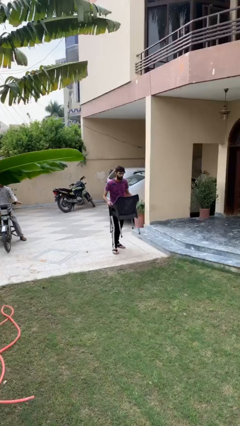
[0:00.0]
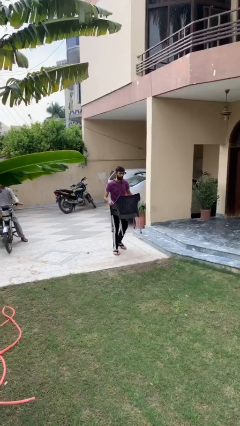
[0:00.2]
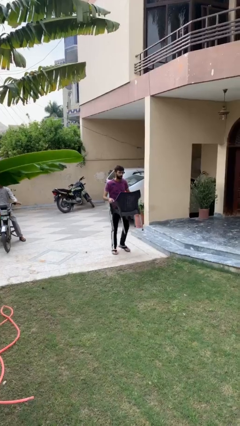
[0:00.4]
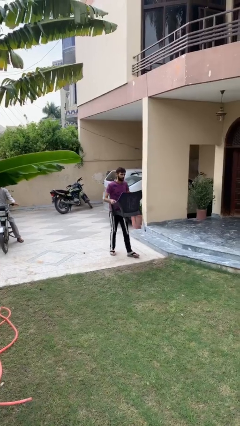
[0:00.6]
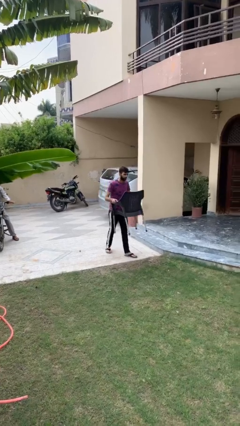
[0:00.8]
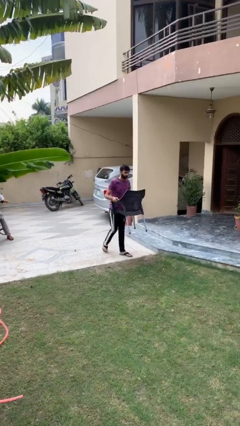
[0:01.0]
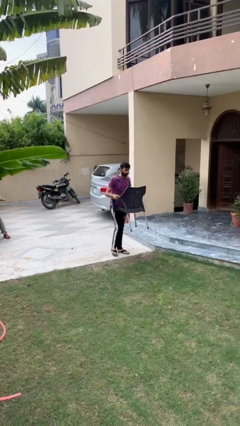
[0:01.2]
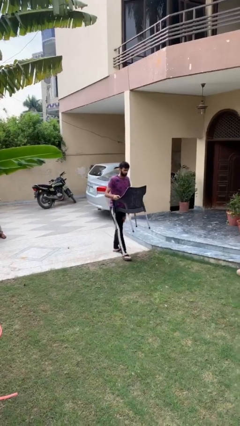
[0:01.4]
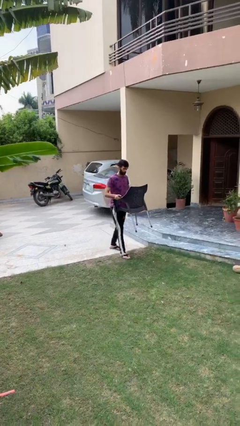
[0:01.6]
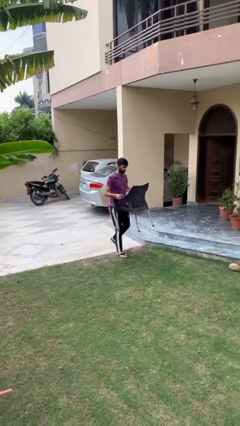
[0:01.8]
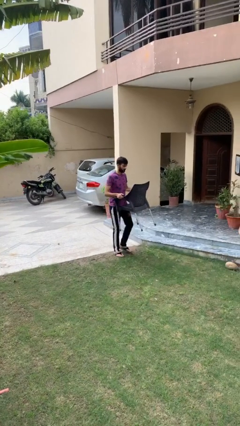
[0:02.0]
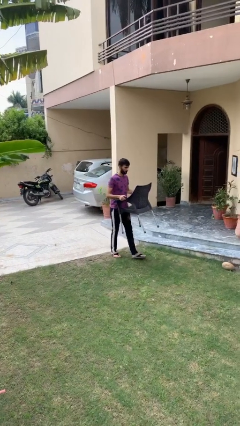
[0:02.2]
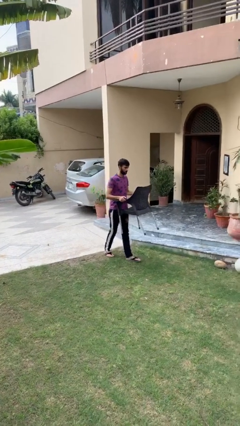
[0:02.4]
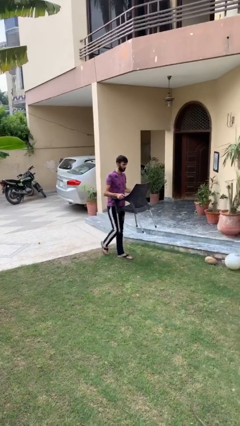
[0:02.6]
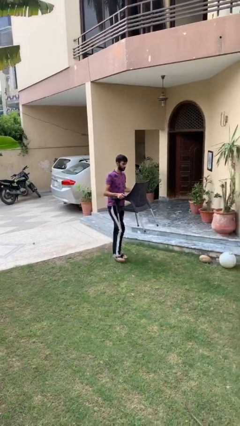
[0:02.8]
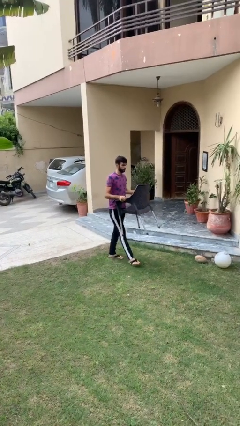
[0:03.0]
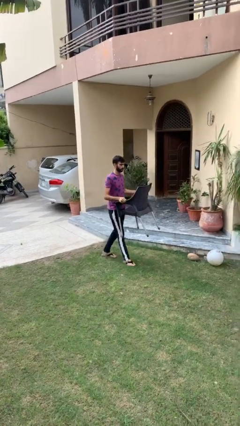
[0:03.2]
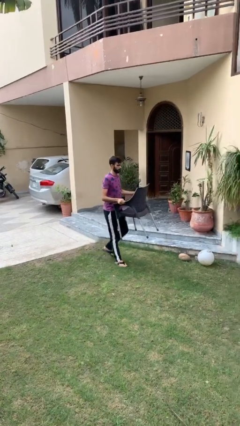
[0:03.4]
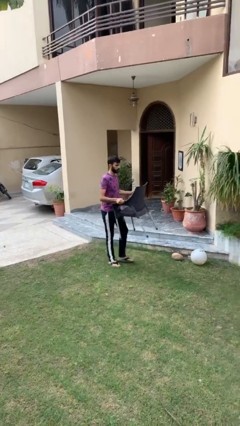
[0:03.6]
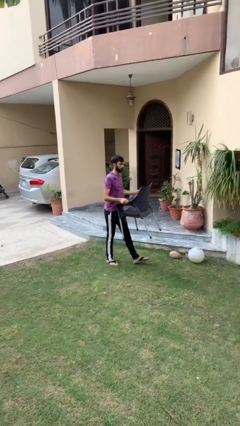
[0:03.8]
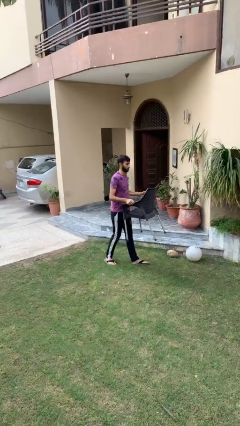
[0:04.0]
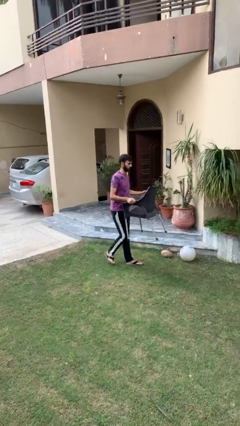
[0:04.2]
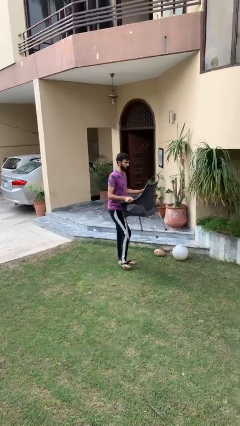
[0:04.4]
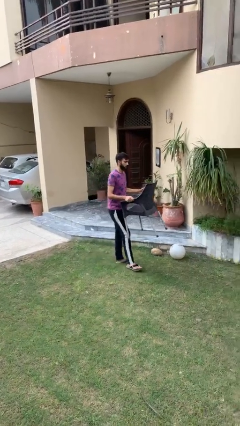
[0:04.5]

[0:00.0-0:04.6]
person carries heavy object

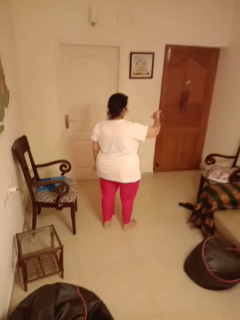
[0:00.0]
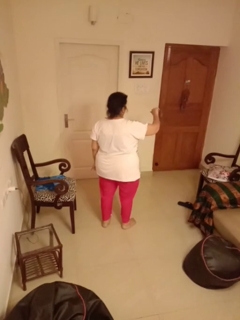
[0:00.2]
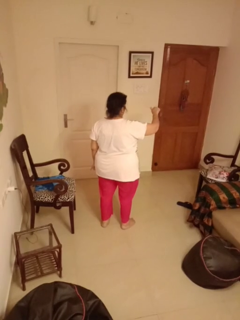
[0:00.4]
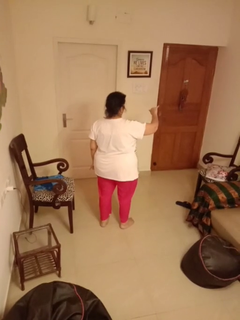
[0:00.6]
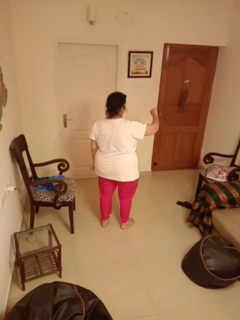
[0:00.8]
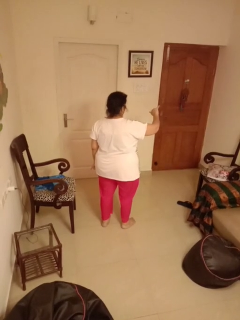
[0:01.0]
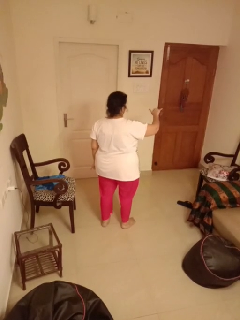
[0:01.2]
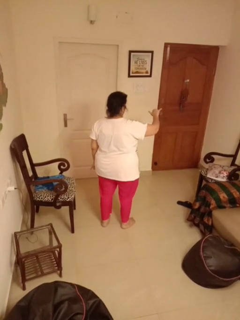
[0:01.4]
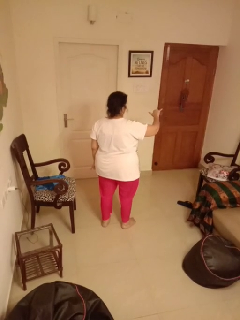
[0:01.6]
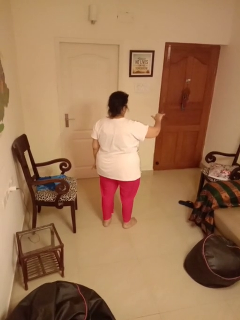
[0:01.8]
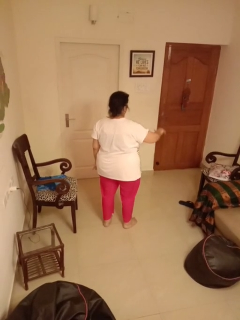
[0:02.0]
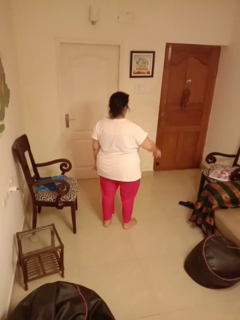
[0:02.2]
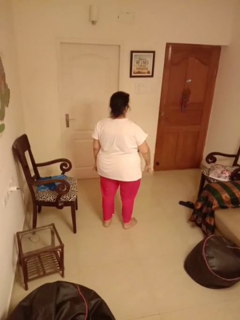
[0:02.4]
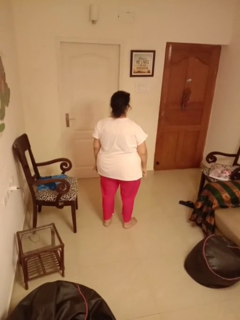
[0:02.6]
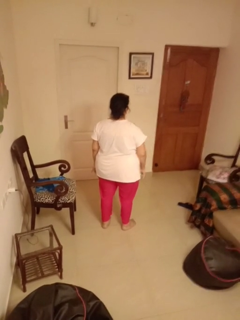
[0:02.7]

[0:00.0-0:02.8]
person gestures hang loose

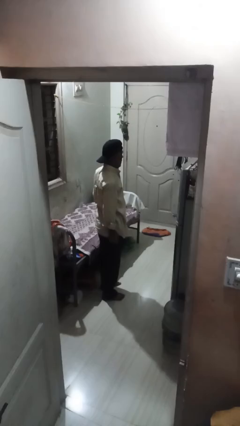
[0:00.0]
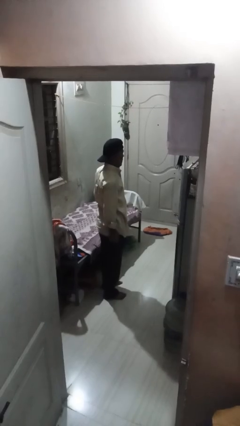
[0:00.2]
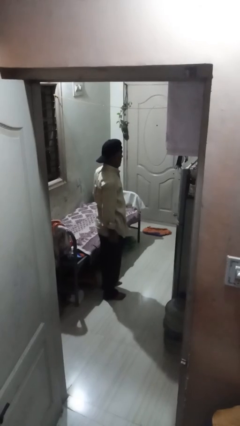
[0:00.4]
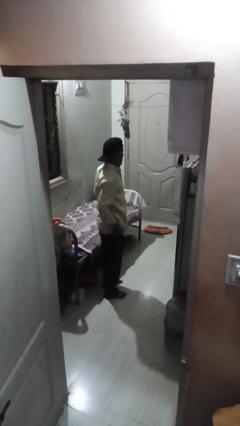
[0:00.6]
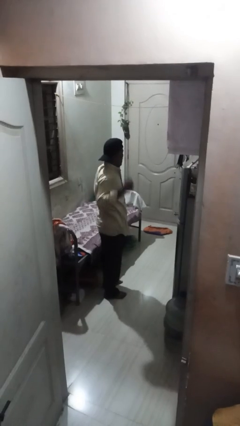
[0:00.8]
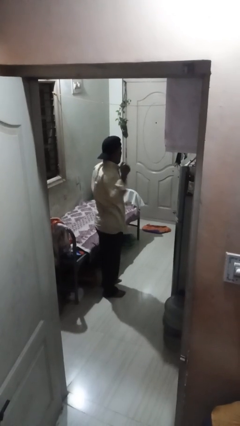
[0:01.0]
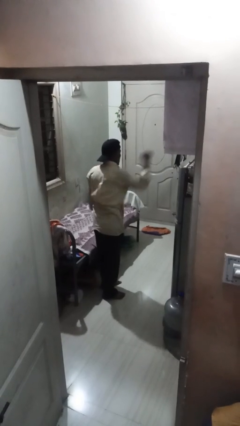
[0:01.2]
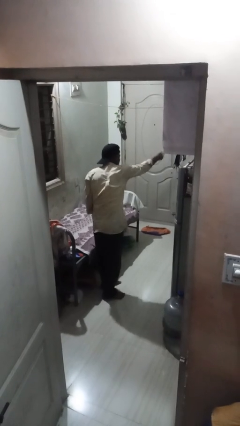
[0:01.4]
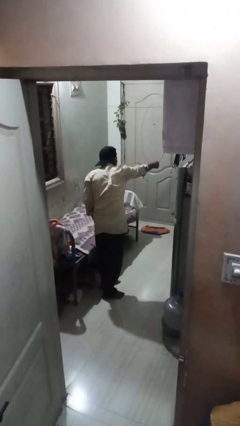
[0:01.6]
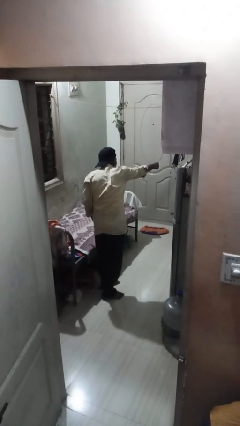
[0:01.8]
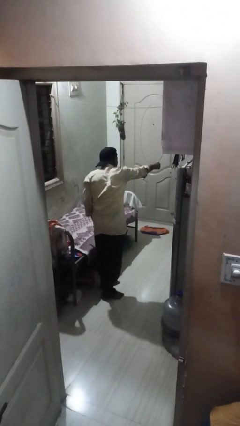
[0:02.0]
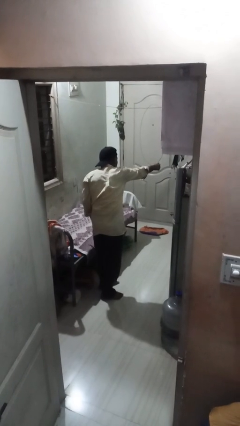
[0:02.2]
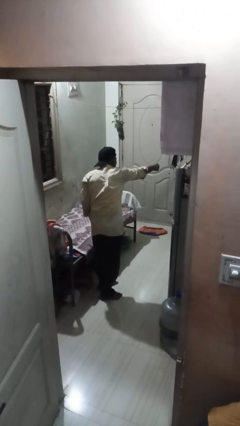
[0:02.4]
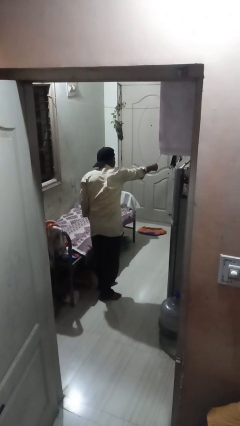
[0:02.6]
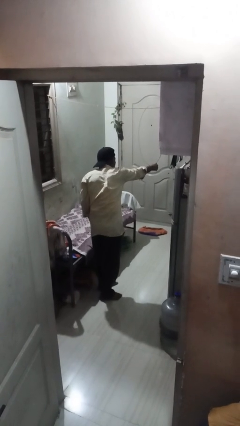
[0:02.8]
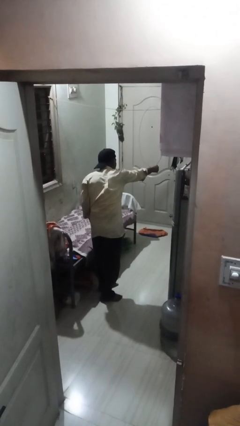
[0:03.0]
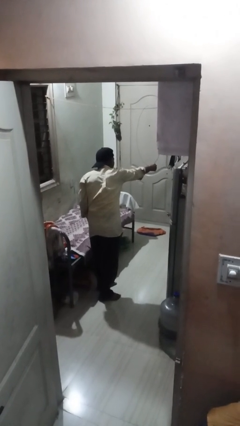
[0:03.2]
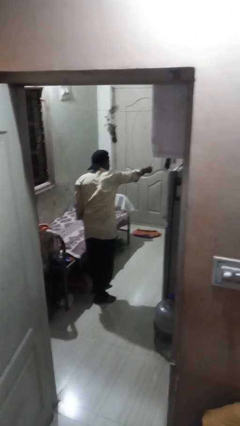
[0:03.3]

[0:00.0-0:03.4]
person punches

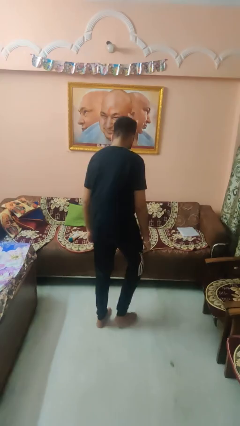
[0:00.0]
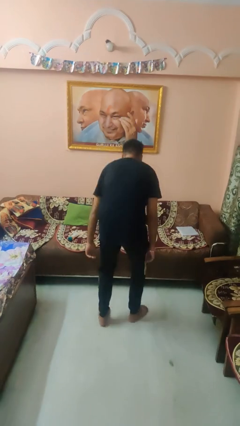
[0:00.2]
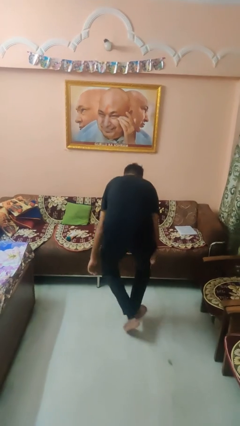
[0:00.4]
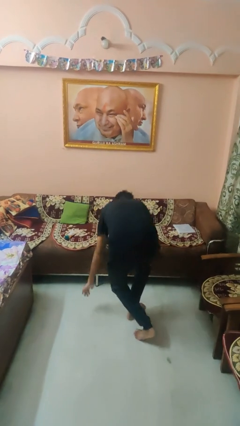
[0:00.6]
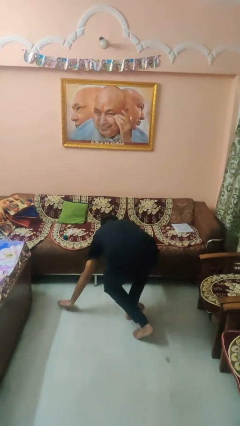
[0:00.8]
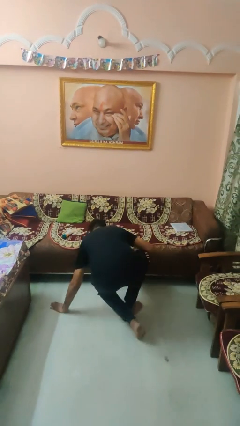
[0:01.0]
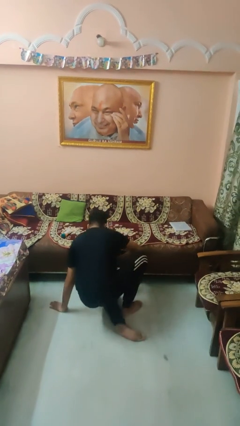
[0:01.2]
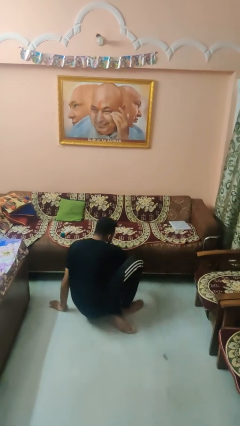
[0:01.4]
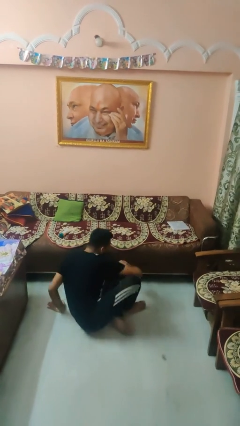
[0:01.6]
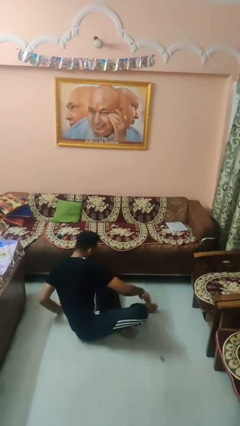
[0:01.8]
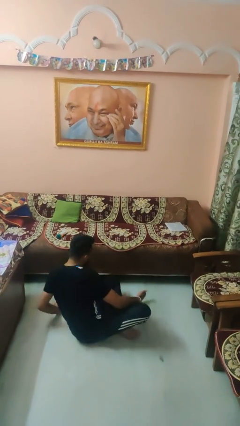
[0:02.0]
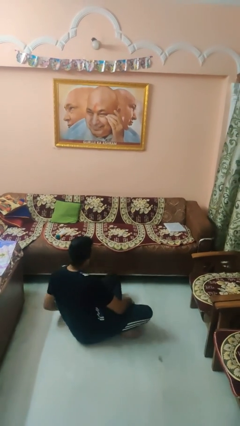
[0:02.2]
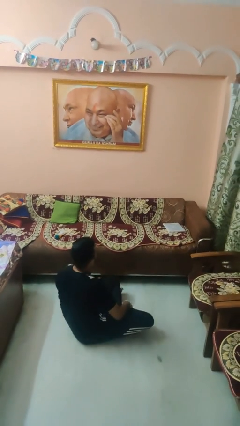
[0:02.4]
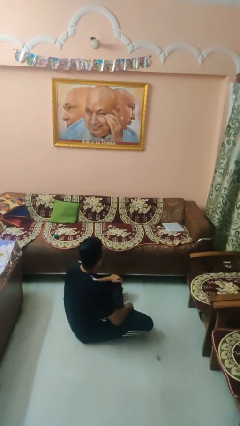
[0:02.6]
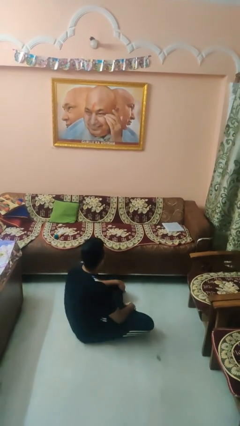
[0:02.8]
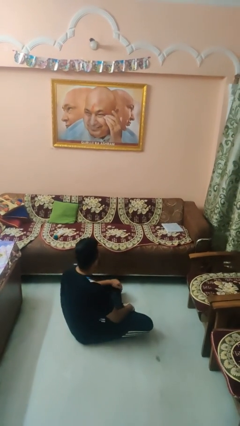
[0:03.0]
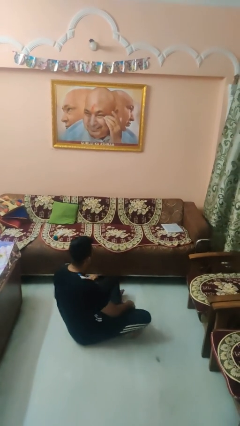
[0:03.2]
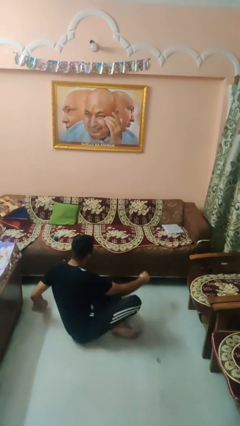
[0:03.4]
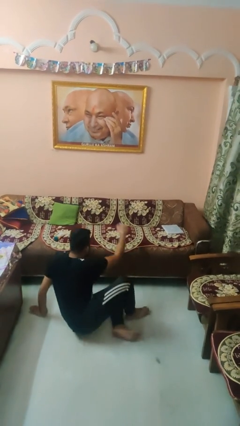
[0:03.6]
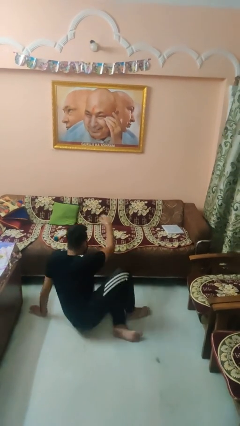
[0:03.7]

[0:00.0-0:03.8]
person sits crisscross

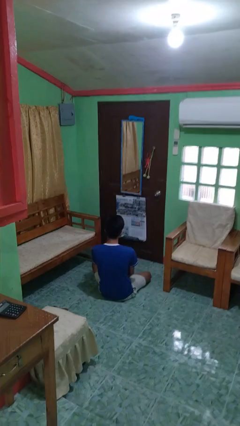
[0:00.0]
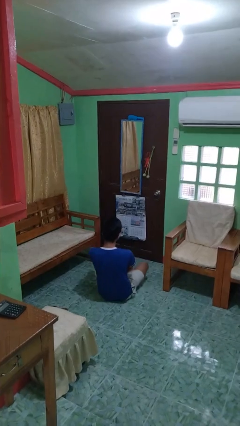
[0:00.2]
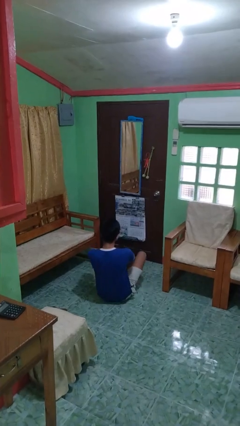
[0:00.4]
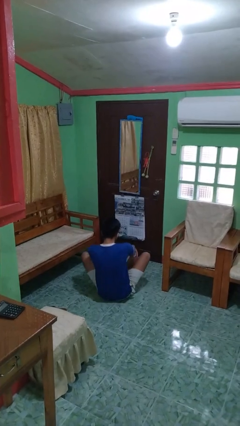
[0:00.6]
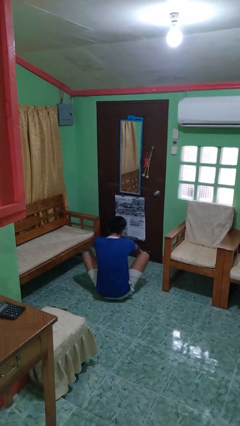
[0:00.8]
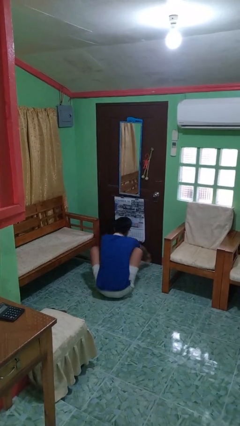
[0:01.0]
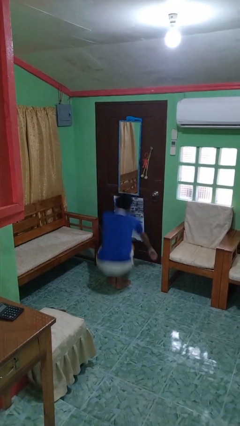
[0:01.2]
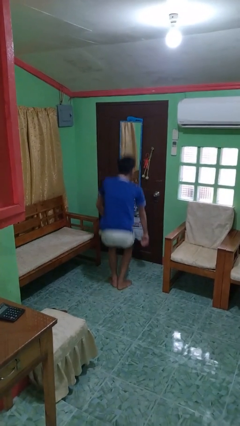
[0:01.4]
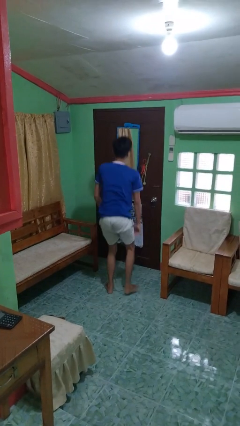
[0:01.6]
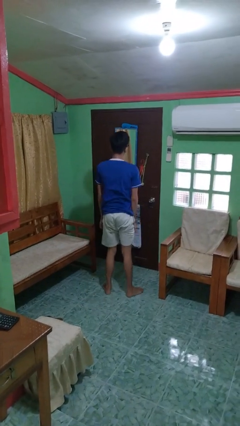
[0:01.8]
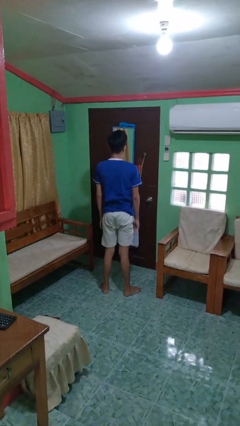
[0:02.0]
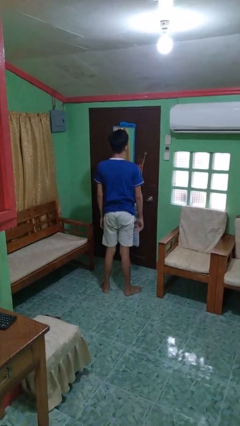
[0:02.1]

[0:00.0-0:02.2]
person stands up

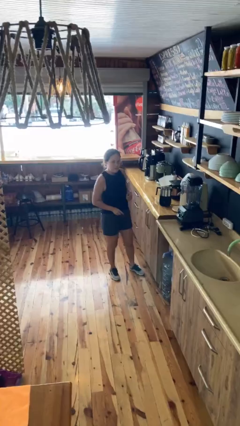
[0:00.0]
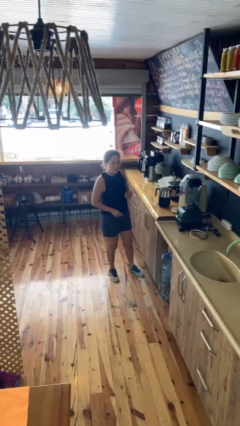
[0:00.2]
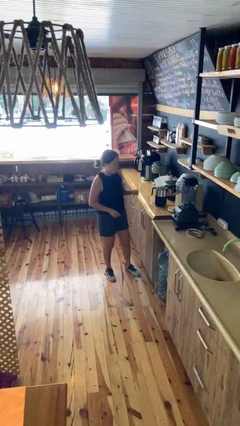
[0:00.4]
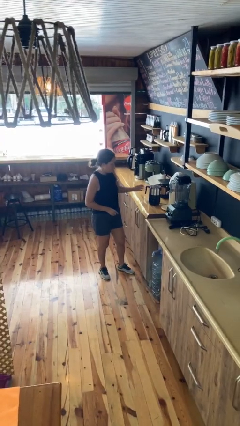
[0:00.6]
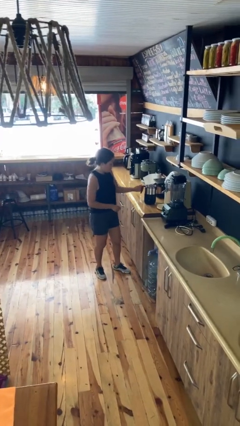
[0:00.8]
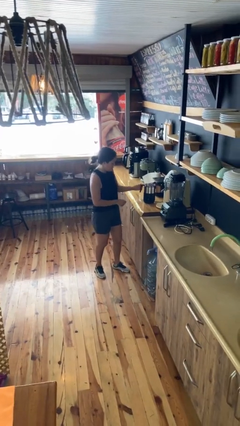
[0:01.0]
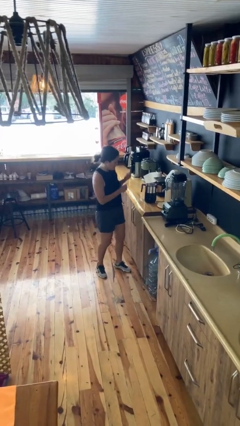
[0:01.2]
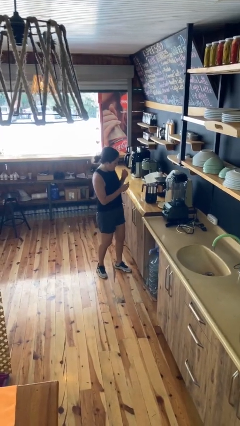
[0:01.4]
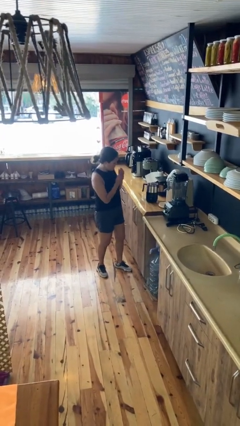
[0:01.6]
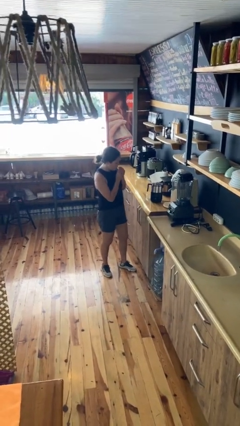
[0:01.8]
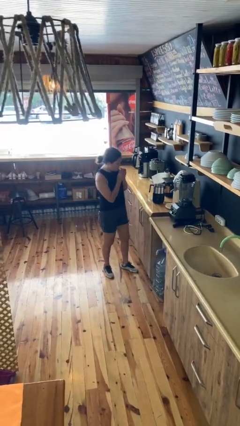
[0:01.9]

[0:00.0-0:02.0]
person burns hand
